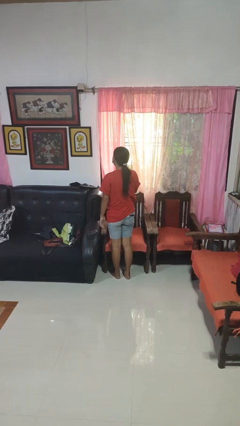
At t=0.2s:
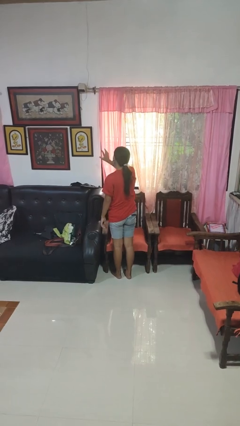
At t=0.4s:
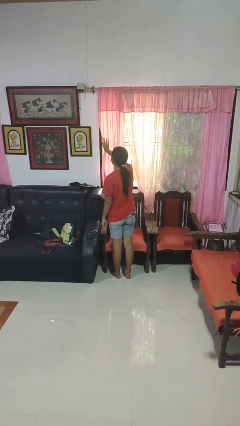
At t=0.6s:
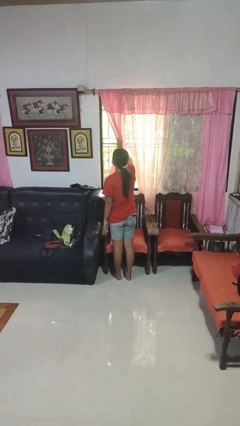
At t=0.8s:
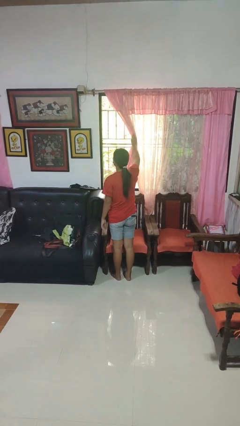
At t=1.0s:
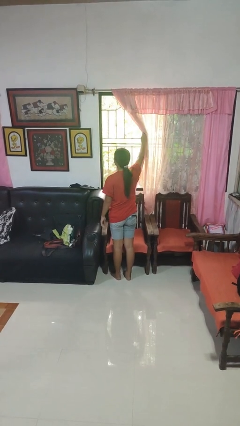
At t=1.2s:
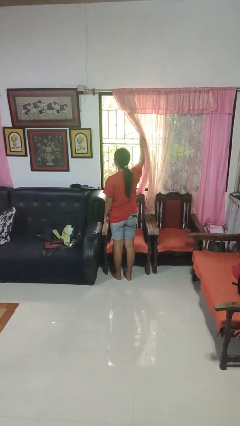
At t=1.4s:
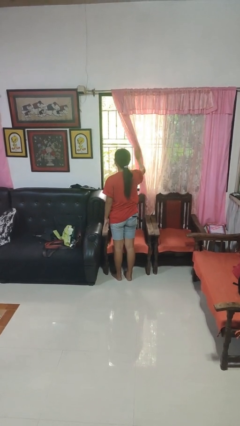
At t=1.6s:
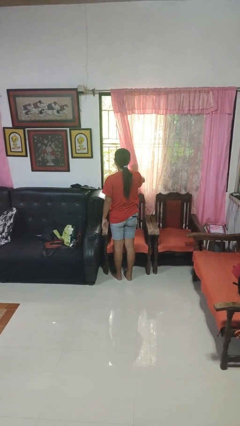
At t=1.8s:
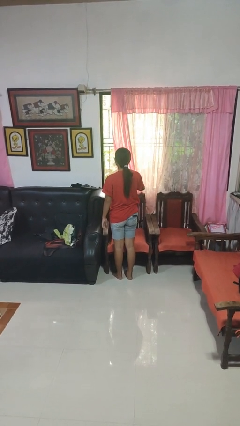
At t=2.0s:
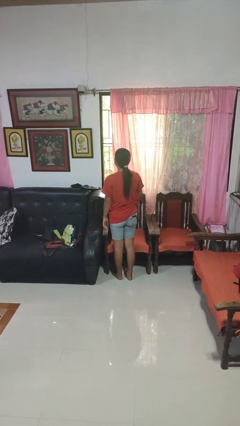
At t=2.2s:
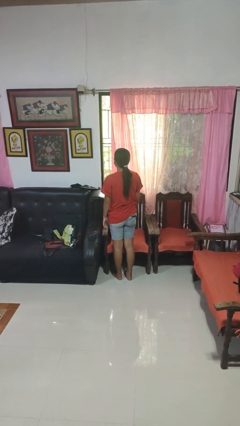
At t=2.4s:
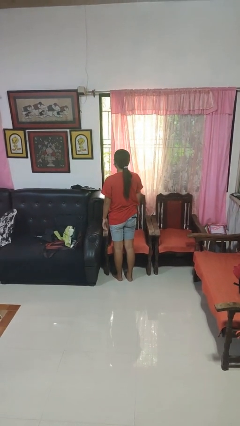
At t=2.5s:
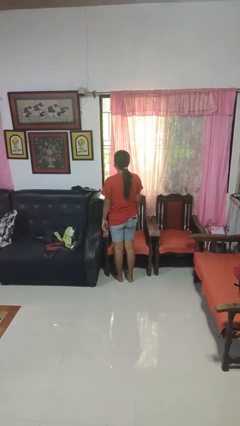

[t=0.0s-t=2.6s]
person opens curtains

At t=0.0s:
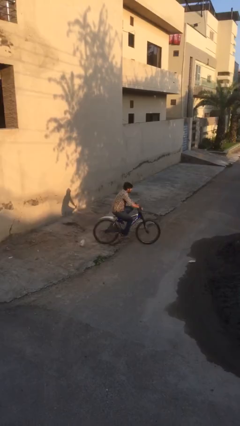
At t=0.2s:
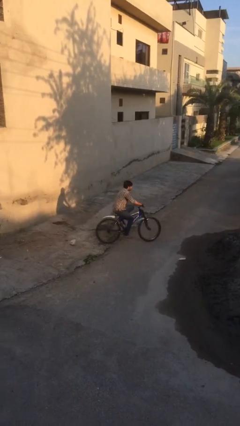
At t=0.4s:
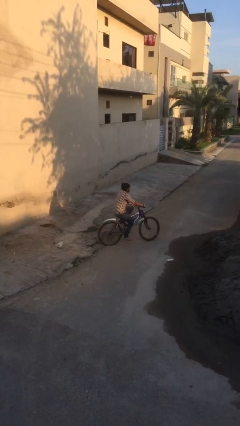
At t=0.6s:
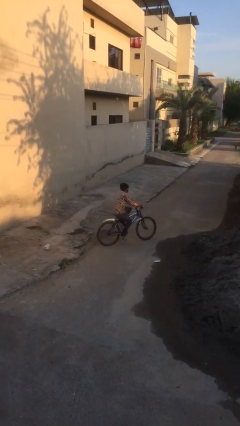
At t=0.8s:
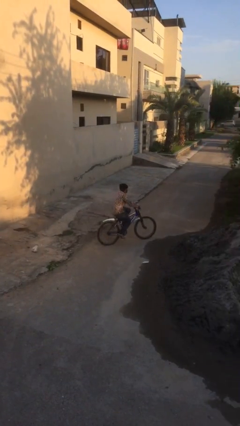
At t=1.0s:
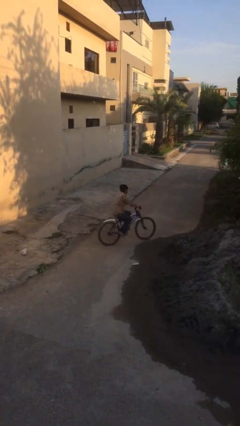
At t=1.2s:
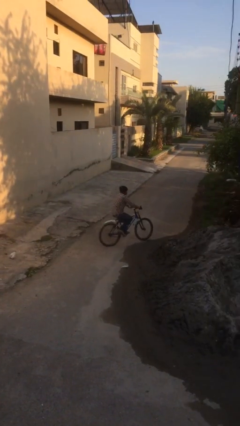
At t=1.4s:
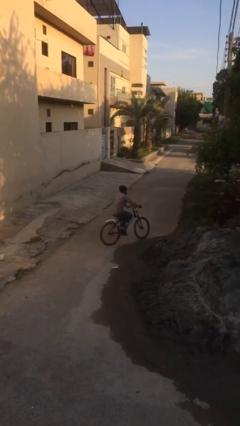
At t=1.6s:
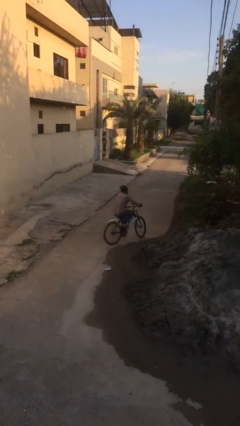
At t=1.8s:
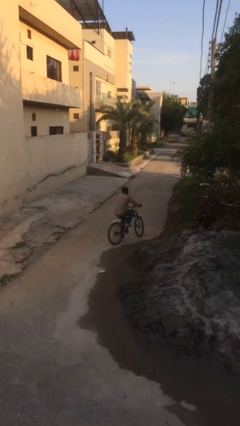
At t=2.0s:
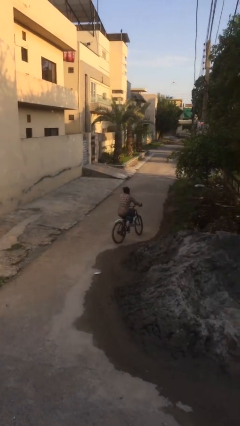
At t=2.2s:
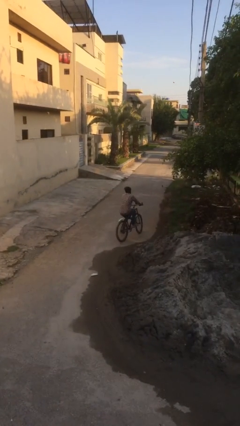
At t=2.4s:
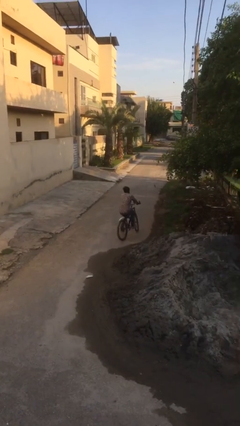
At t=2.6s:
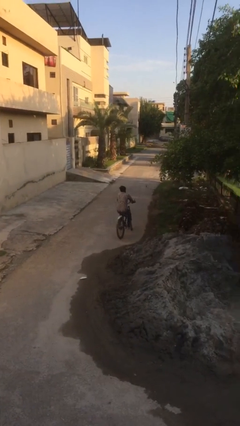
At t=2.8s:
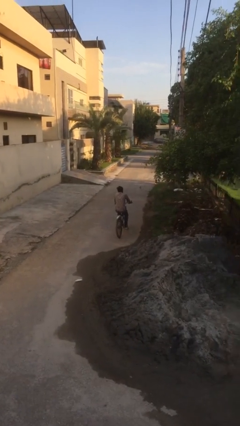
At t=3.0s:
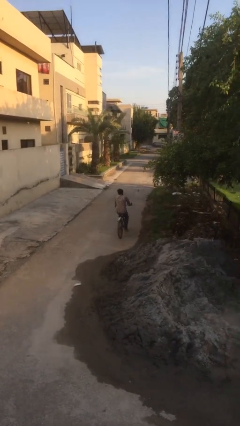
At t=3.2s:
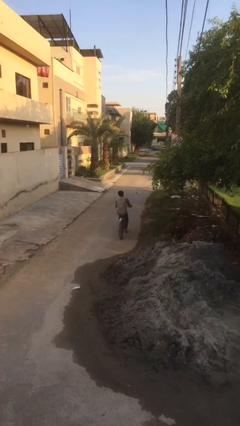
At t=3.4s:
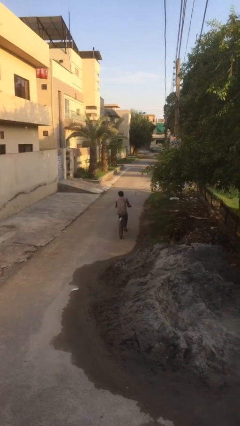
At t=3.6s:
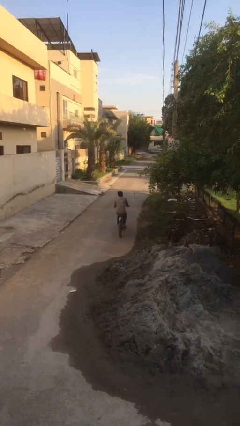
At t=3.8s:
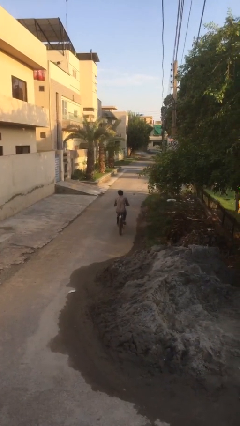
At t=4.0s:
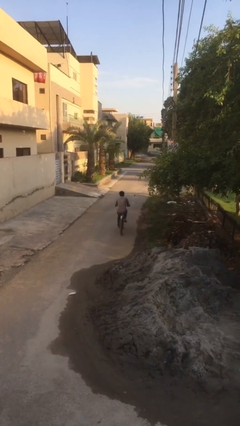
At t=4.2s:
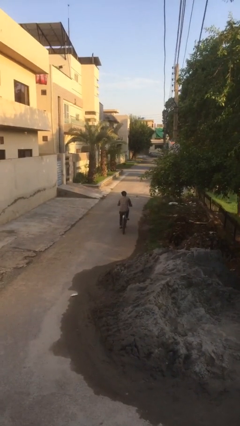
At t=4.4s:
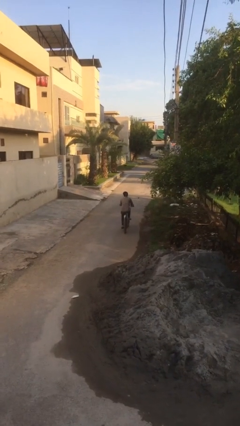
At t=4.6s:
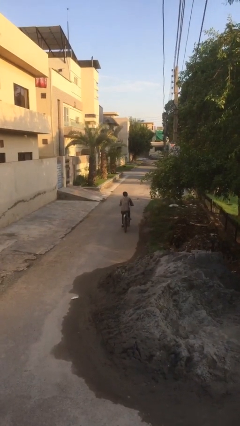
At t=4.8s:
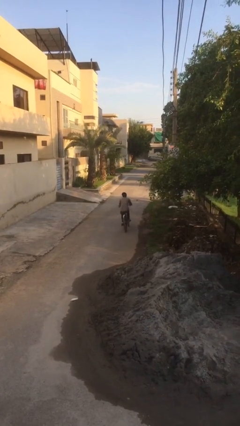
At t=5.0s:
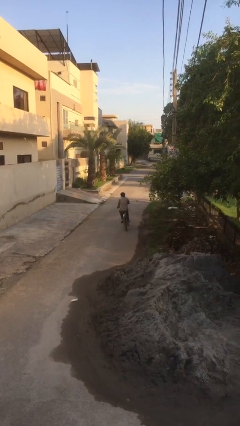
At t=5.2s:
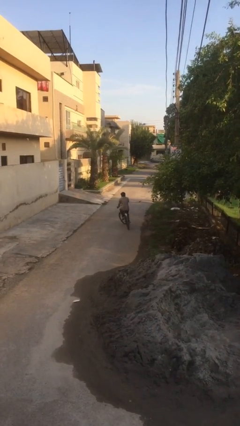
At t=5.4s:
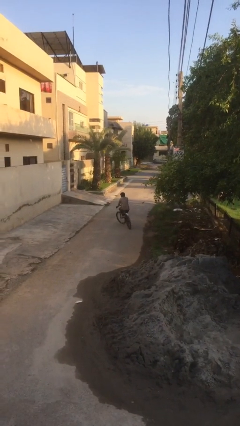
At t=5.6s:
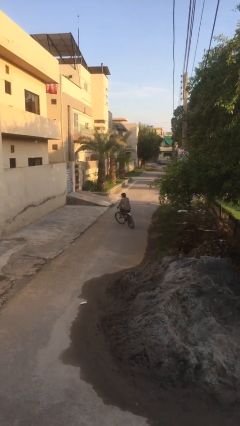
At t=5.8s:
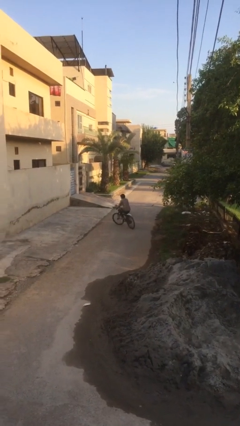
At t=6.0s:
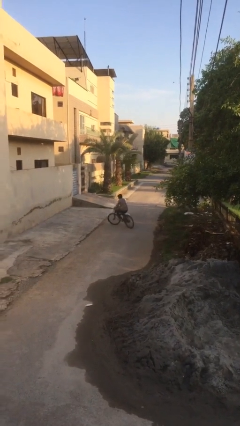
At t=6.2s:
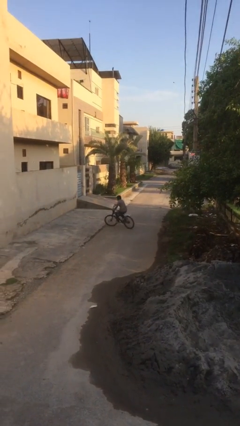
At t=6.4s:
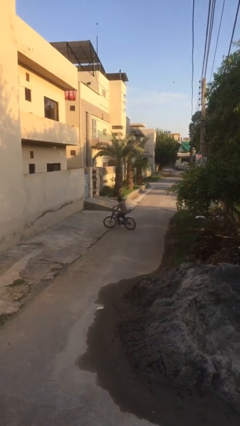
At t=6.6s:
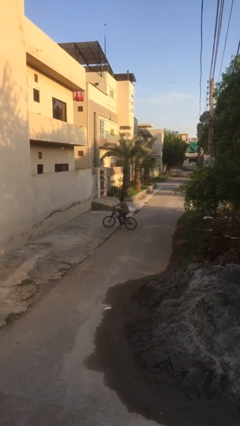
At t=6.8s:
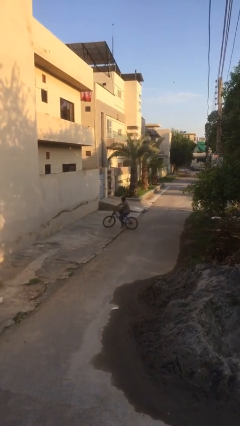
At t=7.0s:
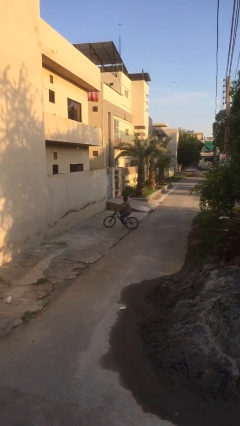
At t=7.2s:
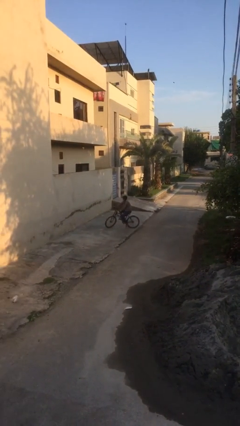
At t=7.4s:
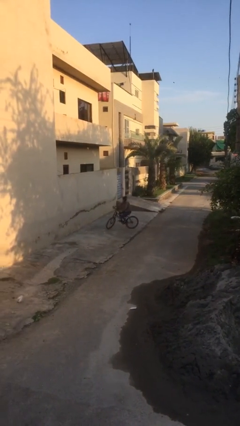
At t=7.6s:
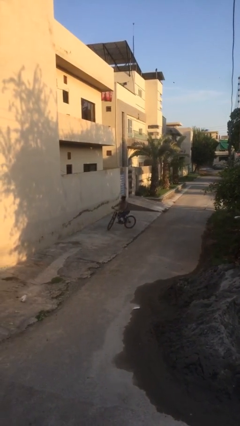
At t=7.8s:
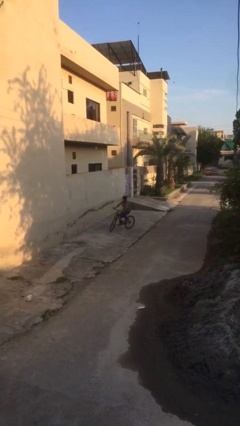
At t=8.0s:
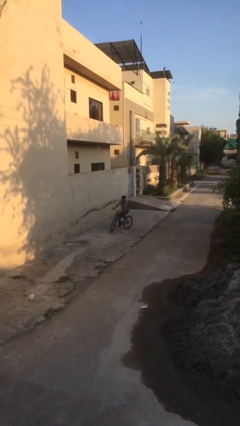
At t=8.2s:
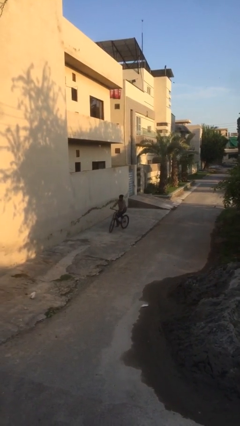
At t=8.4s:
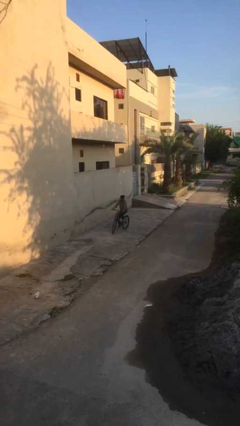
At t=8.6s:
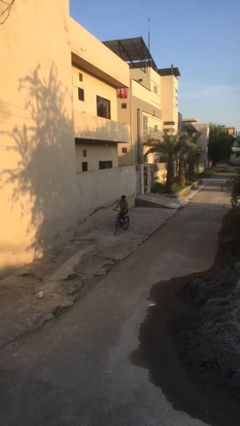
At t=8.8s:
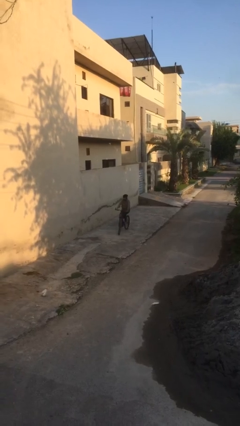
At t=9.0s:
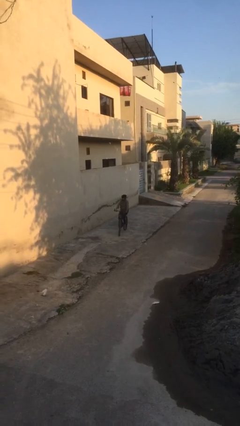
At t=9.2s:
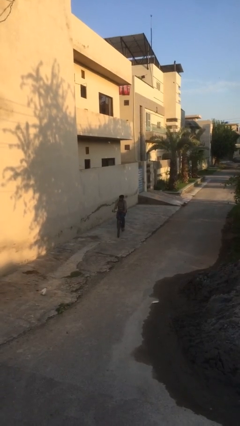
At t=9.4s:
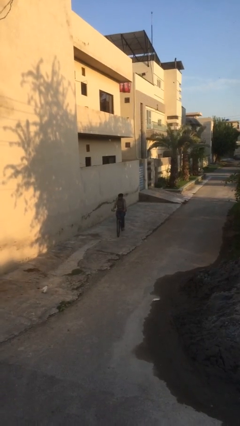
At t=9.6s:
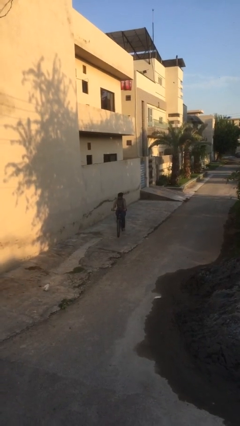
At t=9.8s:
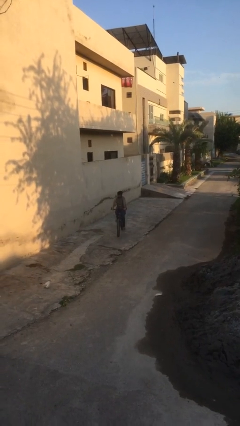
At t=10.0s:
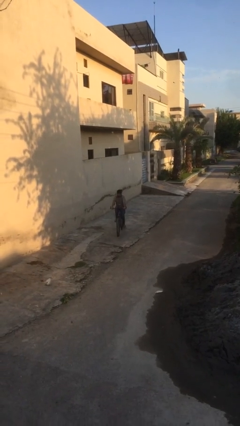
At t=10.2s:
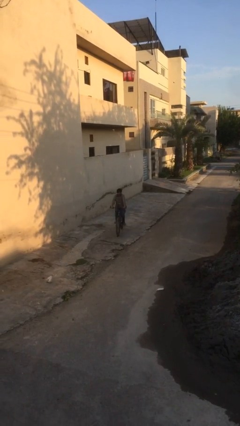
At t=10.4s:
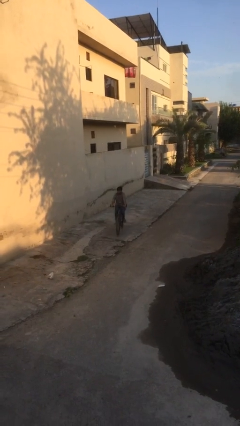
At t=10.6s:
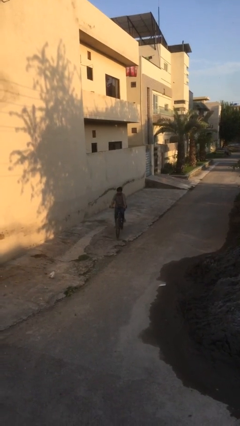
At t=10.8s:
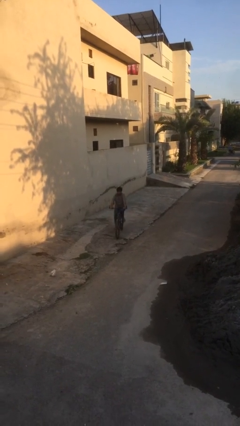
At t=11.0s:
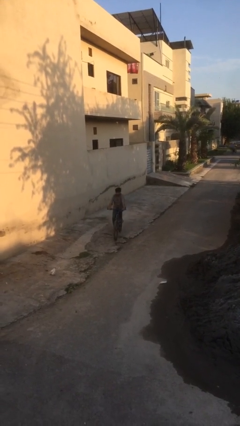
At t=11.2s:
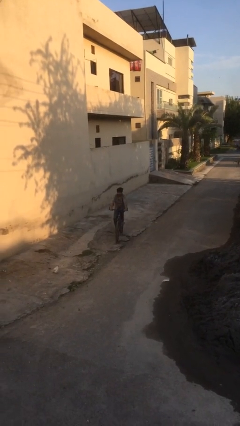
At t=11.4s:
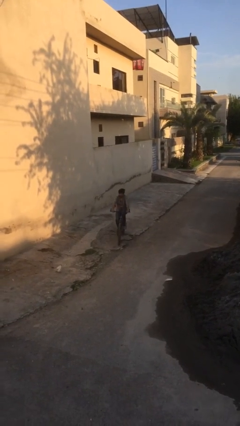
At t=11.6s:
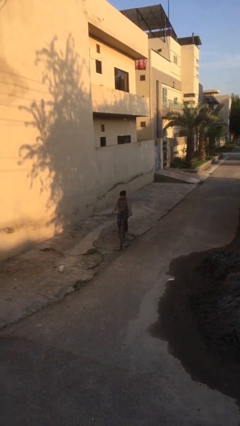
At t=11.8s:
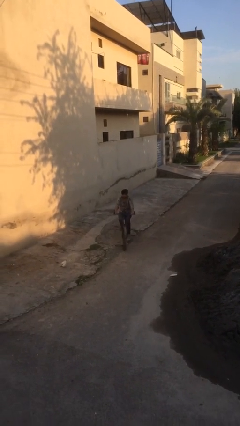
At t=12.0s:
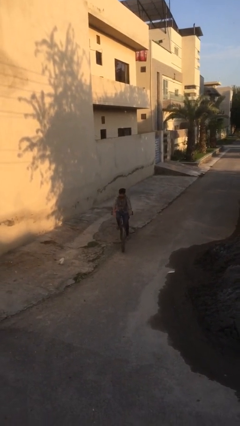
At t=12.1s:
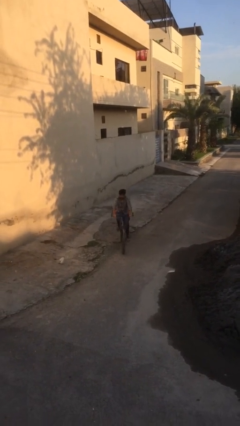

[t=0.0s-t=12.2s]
person rides bicycle

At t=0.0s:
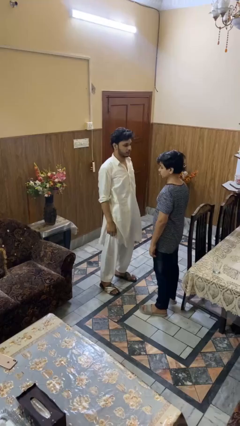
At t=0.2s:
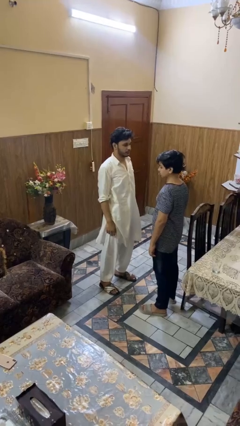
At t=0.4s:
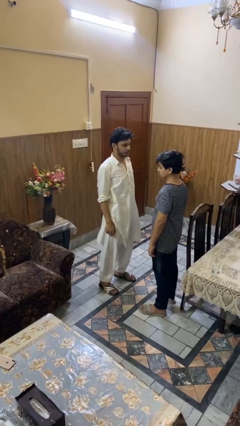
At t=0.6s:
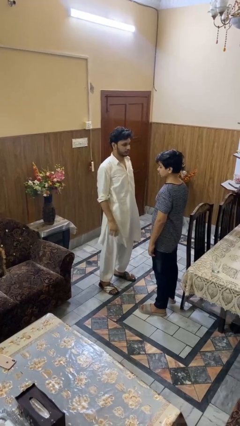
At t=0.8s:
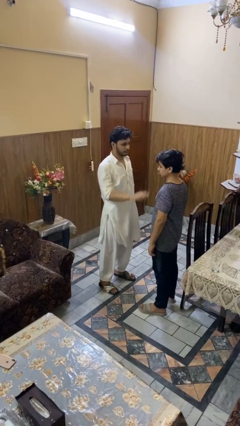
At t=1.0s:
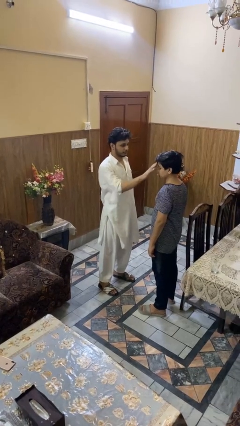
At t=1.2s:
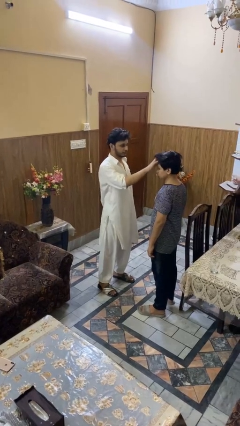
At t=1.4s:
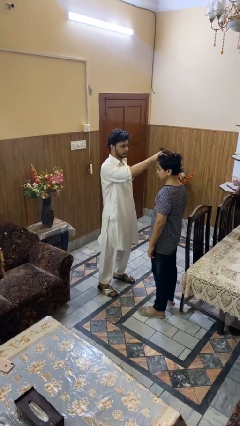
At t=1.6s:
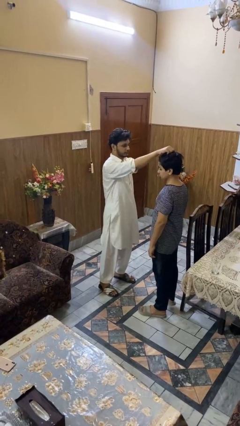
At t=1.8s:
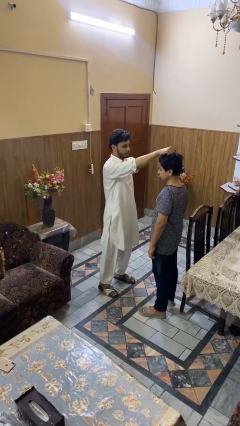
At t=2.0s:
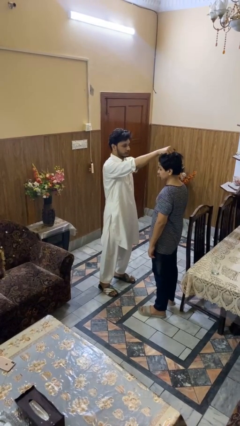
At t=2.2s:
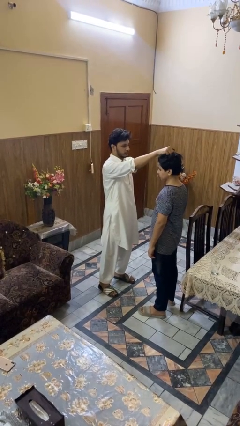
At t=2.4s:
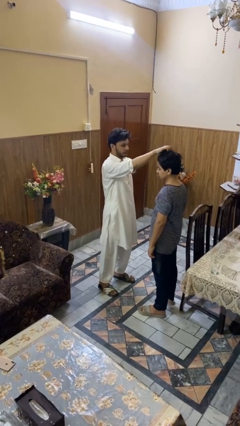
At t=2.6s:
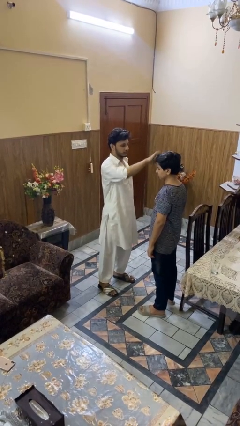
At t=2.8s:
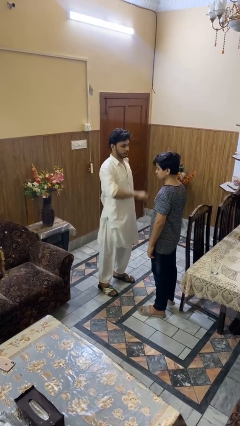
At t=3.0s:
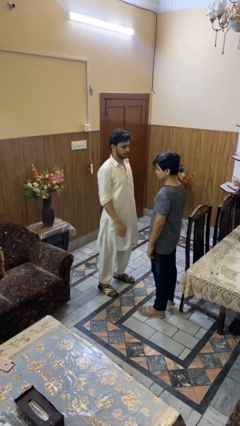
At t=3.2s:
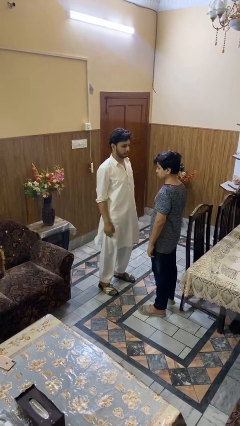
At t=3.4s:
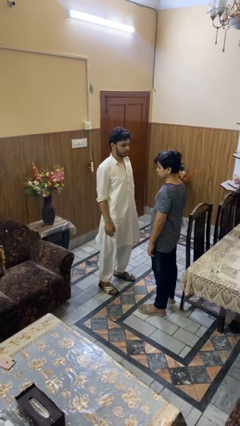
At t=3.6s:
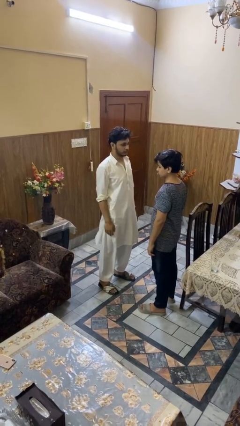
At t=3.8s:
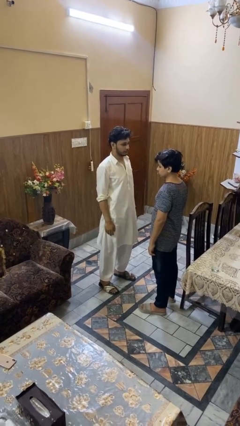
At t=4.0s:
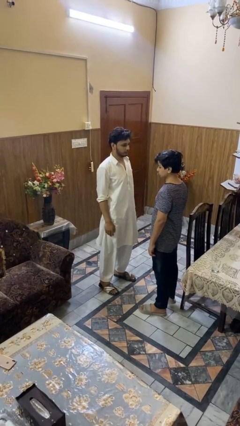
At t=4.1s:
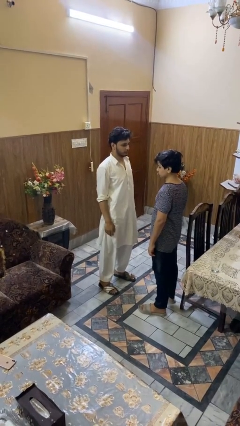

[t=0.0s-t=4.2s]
person grabs person by hair
